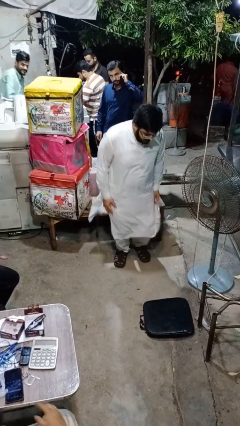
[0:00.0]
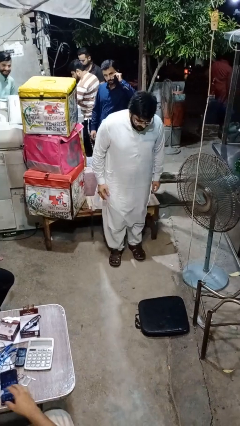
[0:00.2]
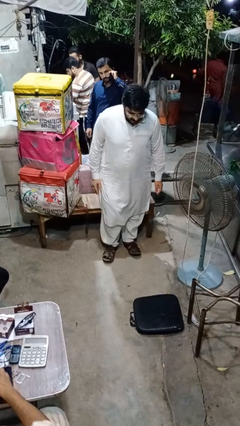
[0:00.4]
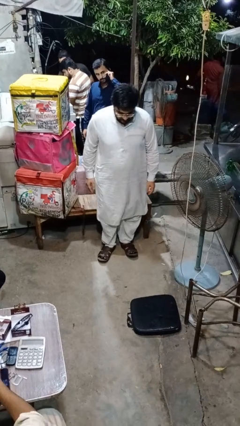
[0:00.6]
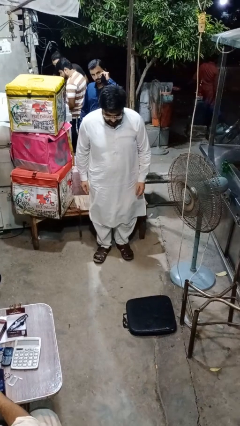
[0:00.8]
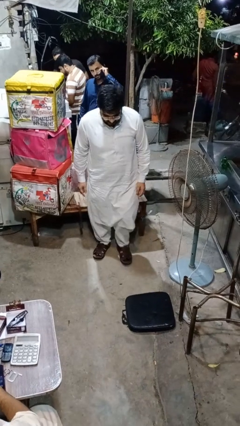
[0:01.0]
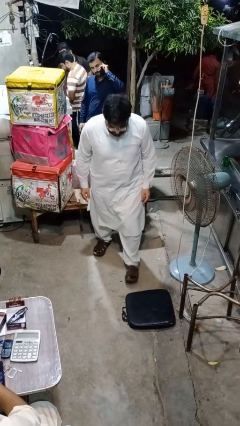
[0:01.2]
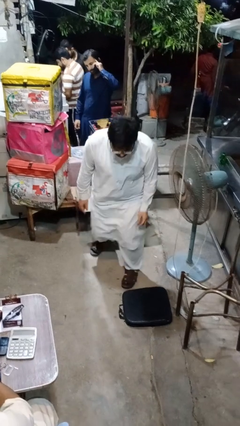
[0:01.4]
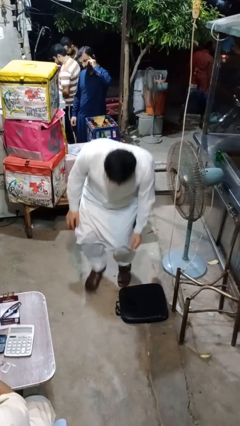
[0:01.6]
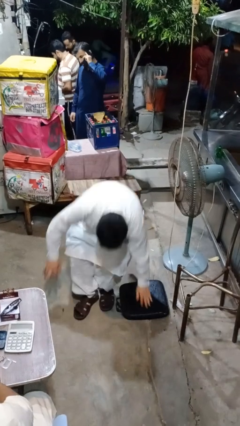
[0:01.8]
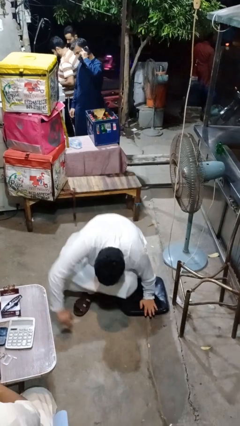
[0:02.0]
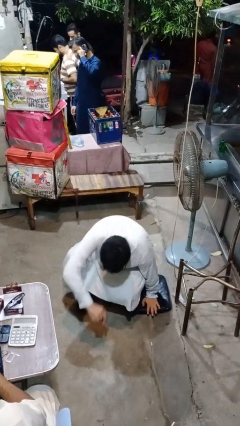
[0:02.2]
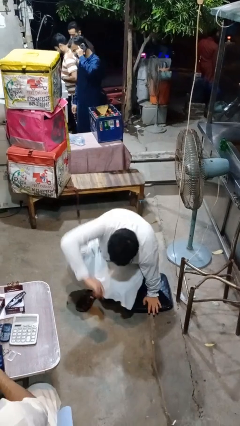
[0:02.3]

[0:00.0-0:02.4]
person trips on object on floor

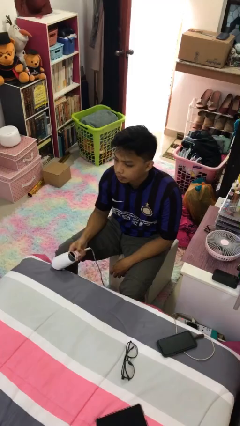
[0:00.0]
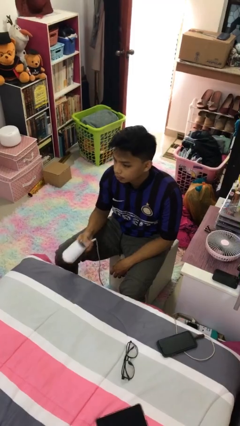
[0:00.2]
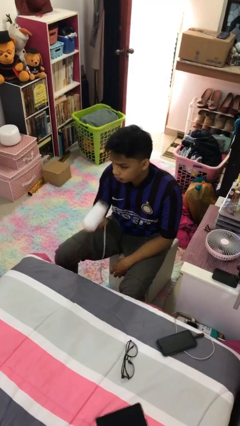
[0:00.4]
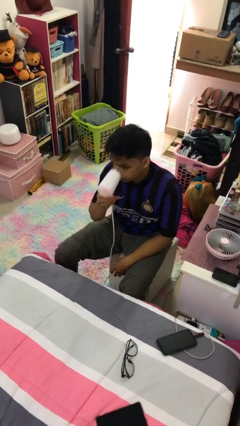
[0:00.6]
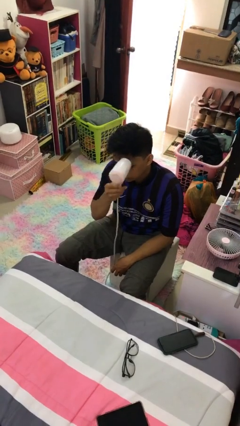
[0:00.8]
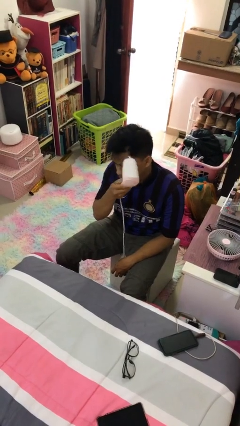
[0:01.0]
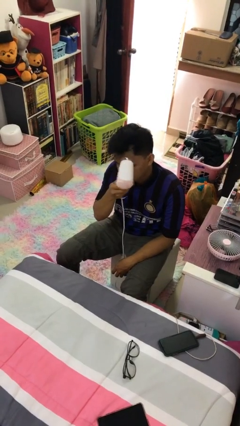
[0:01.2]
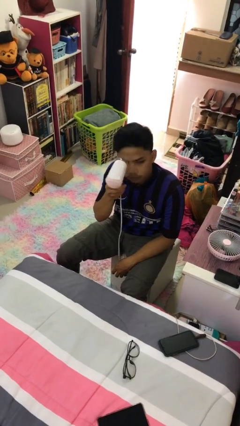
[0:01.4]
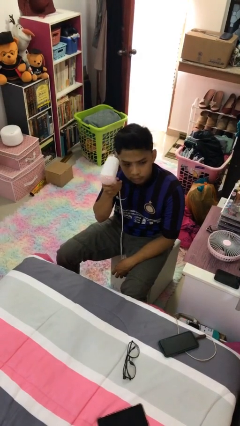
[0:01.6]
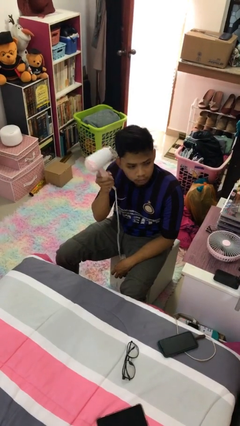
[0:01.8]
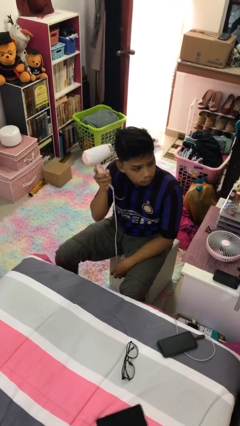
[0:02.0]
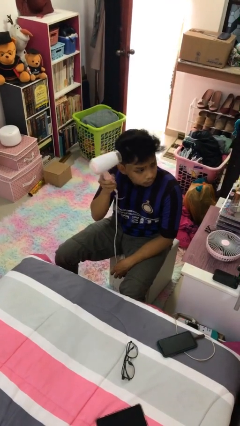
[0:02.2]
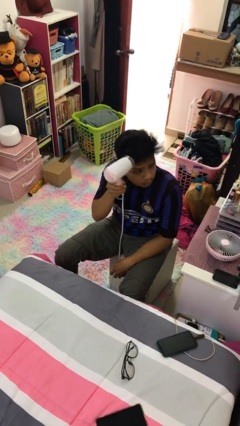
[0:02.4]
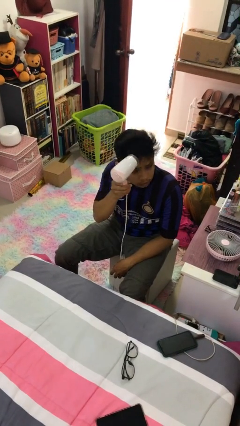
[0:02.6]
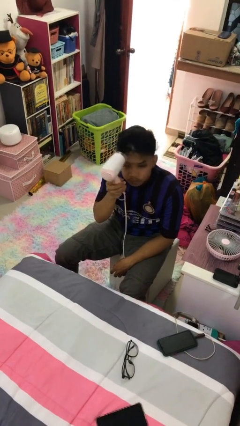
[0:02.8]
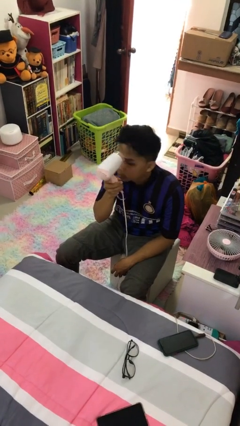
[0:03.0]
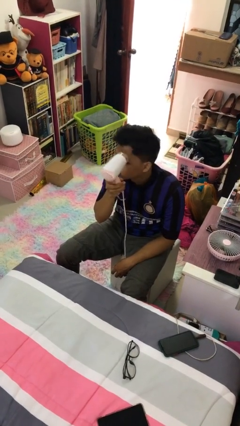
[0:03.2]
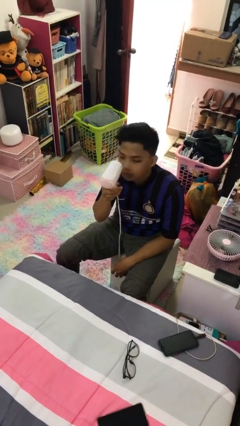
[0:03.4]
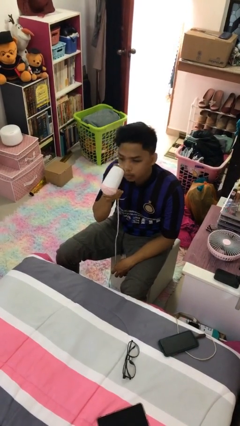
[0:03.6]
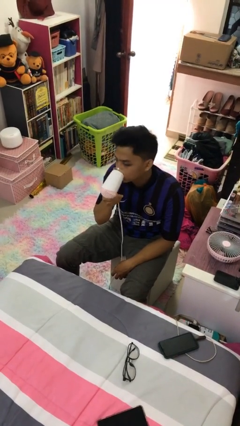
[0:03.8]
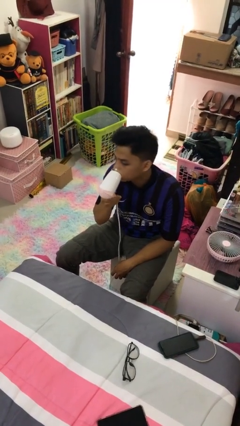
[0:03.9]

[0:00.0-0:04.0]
person dries hair with hairdryer

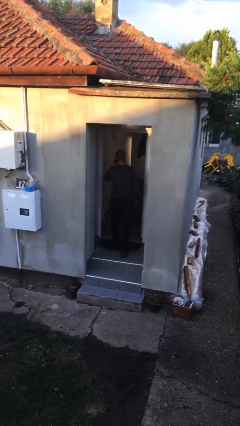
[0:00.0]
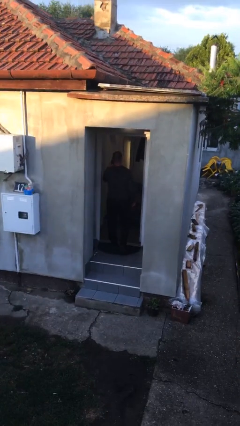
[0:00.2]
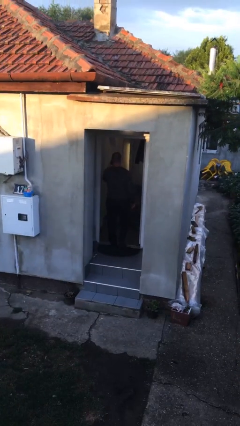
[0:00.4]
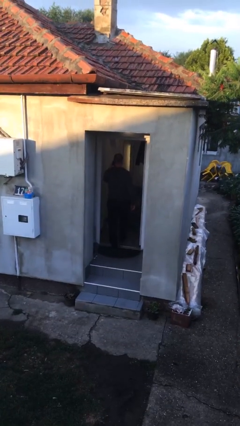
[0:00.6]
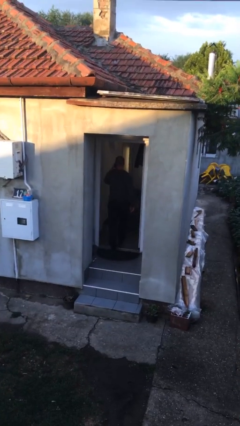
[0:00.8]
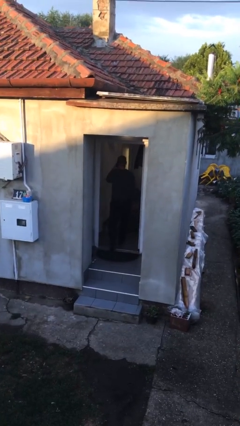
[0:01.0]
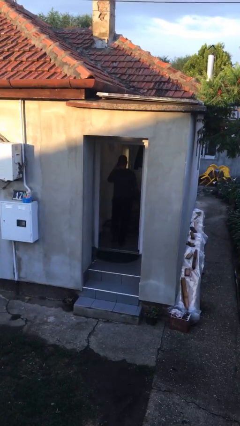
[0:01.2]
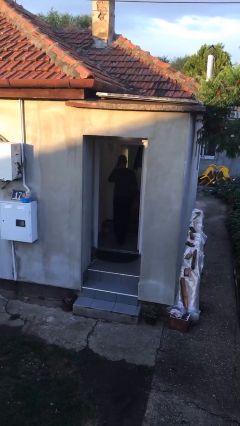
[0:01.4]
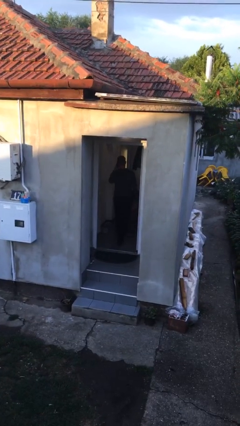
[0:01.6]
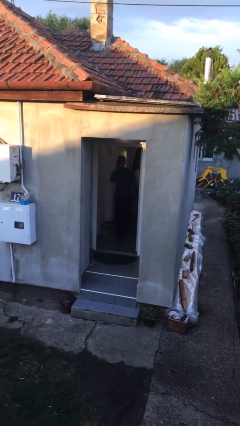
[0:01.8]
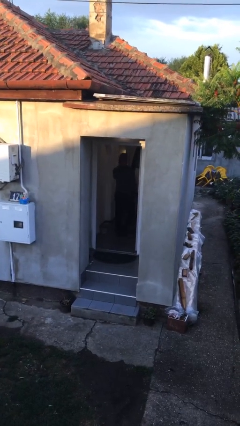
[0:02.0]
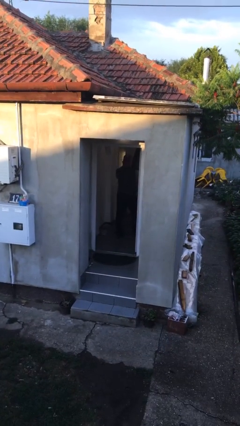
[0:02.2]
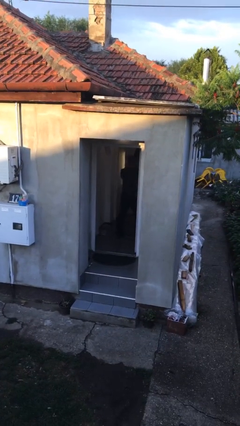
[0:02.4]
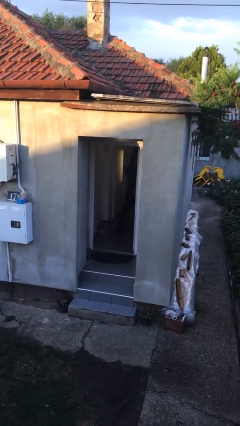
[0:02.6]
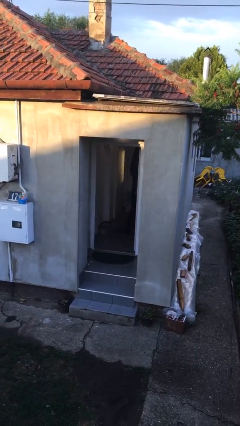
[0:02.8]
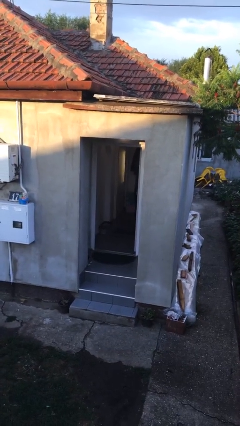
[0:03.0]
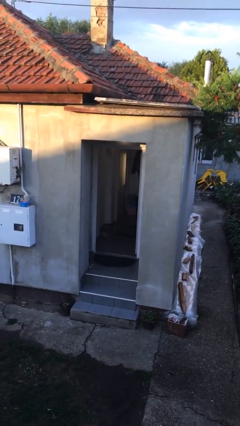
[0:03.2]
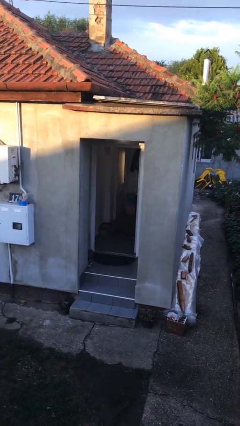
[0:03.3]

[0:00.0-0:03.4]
person exits scene through structure

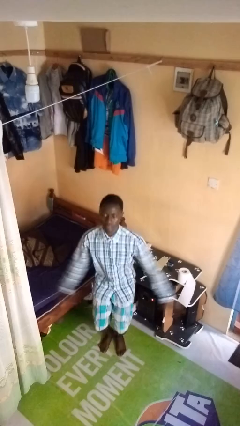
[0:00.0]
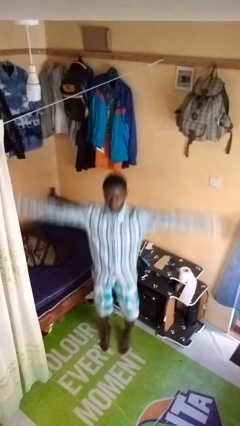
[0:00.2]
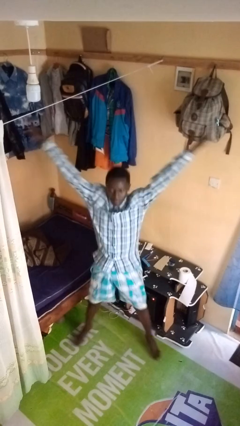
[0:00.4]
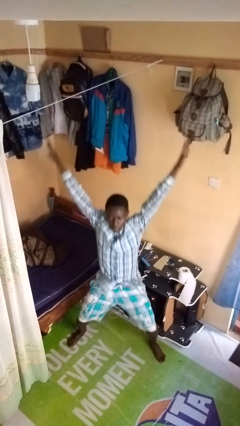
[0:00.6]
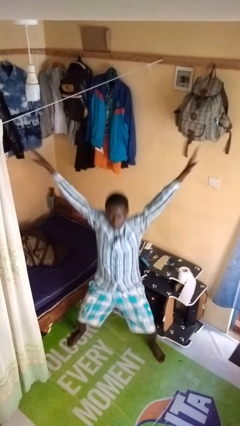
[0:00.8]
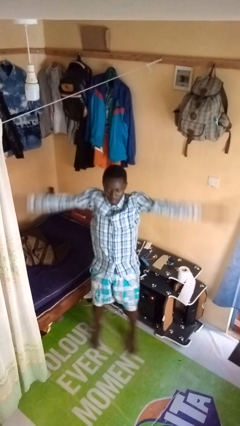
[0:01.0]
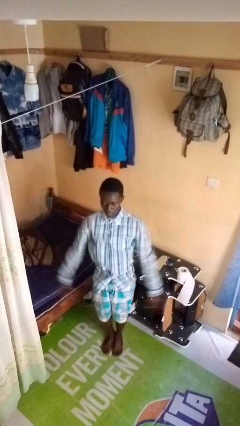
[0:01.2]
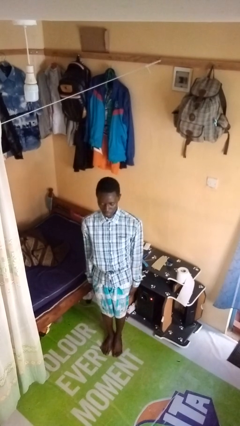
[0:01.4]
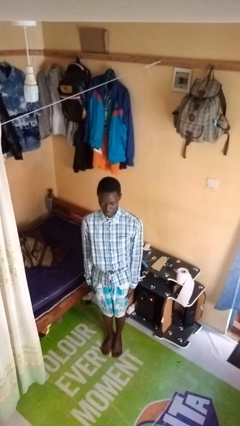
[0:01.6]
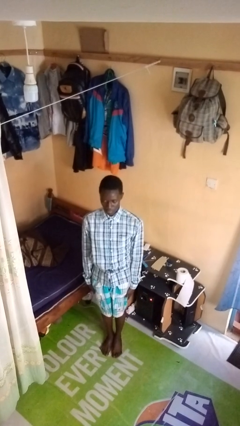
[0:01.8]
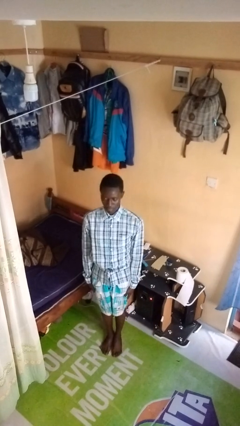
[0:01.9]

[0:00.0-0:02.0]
person exercises with jumping jacks

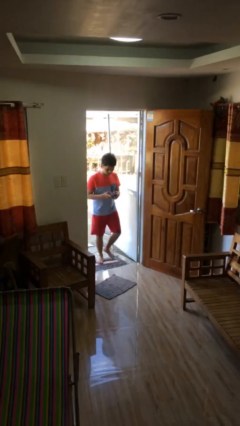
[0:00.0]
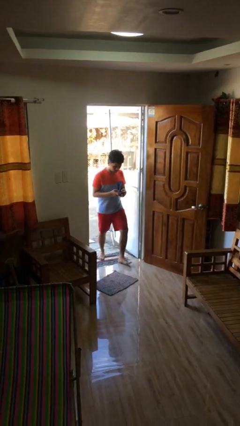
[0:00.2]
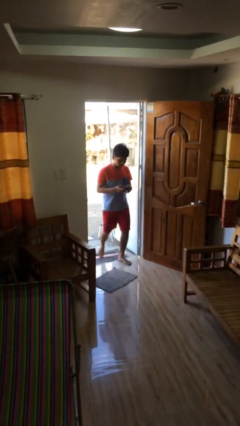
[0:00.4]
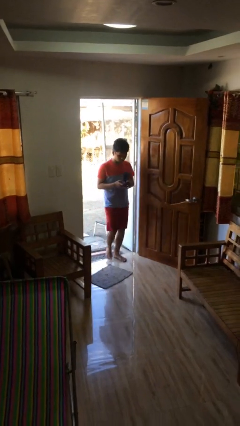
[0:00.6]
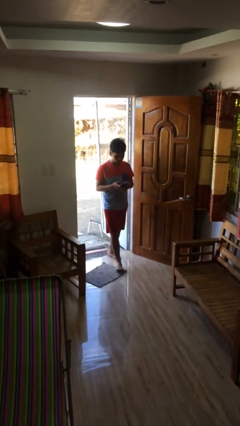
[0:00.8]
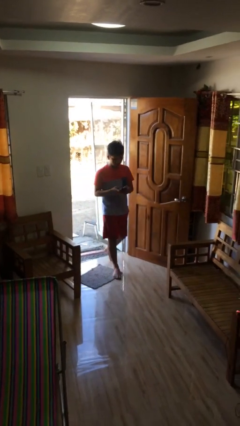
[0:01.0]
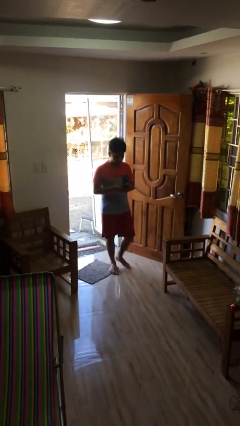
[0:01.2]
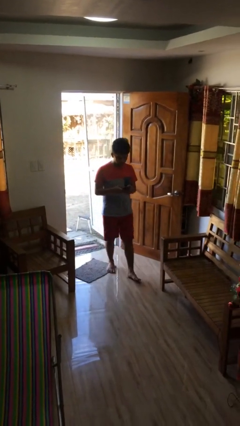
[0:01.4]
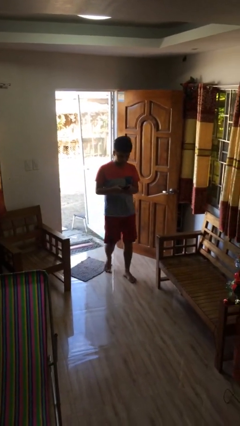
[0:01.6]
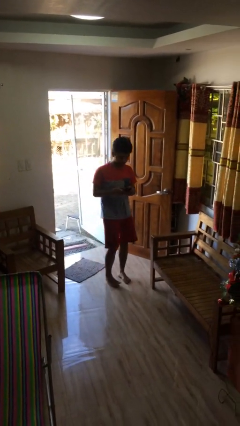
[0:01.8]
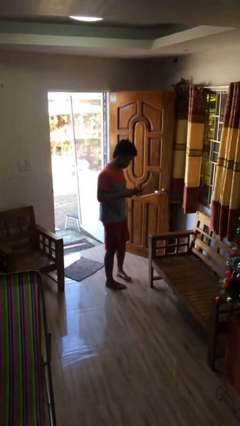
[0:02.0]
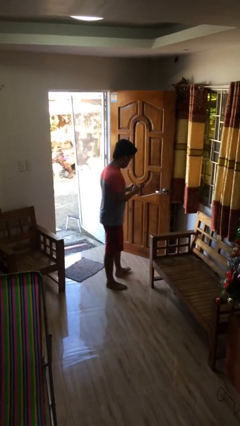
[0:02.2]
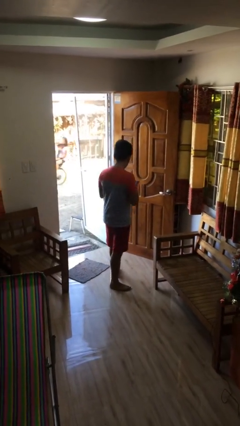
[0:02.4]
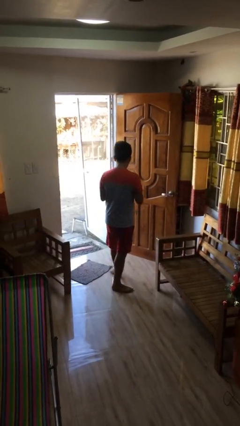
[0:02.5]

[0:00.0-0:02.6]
person enters scene through structure

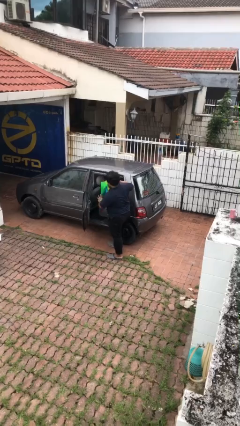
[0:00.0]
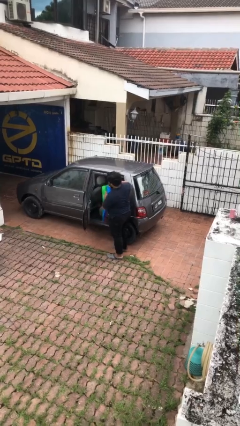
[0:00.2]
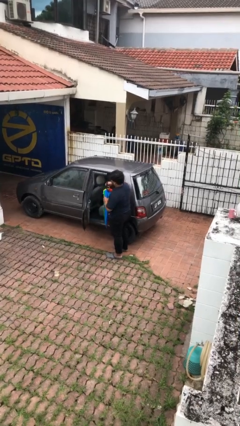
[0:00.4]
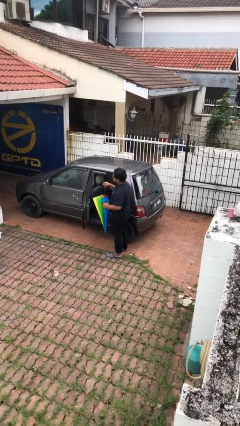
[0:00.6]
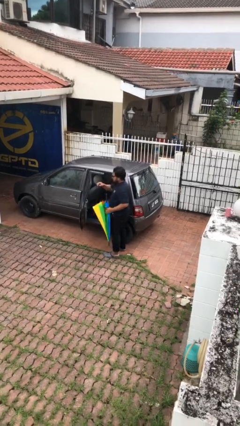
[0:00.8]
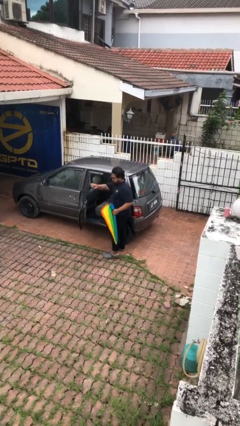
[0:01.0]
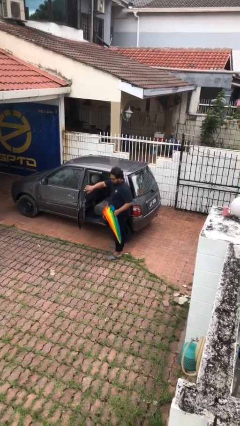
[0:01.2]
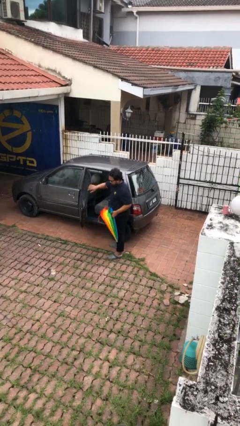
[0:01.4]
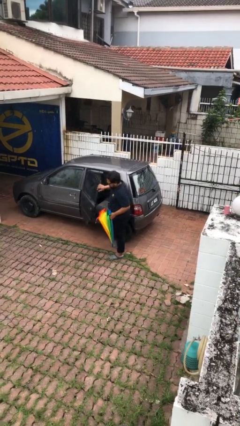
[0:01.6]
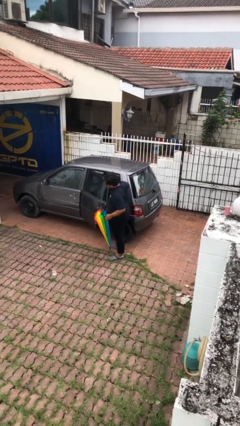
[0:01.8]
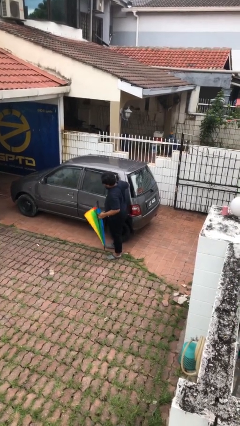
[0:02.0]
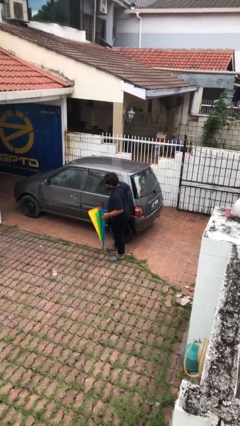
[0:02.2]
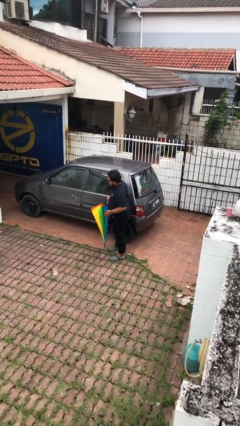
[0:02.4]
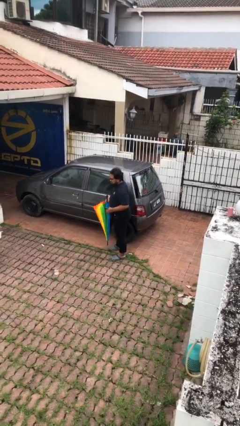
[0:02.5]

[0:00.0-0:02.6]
person closes car door
